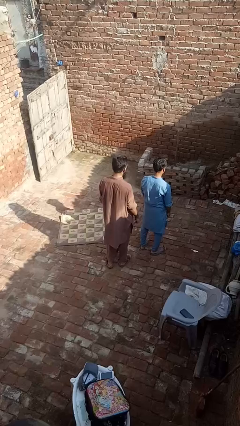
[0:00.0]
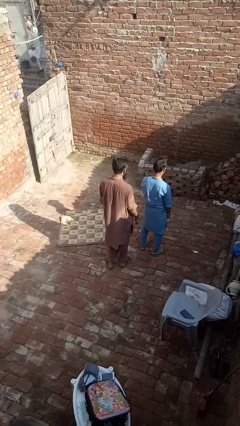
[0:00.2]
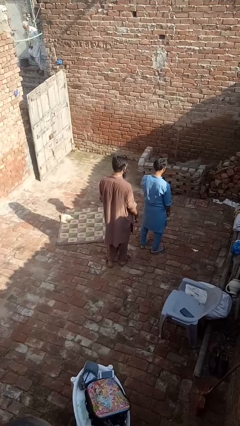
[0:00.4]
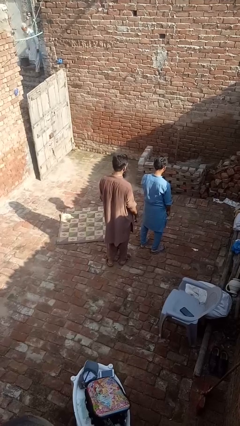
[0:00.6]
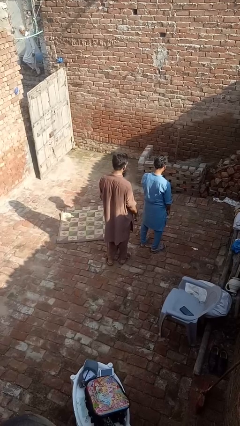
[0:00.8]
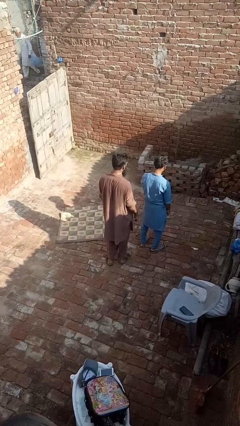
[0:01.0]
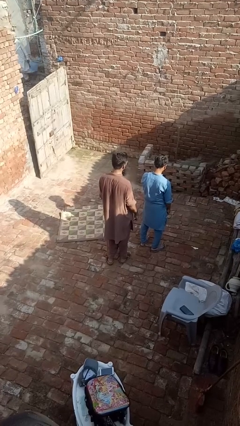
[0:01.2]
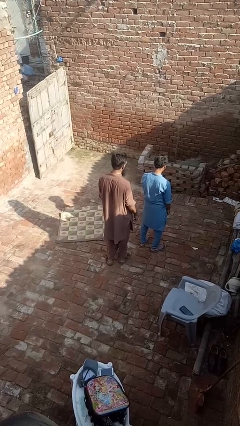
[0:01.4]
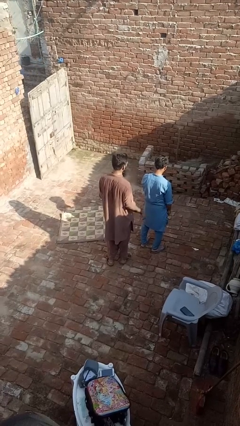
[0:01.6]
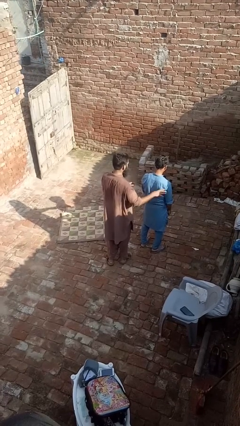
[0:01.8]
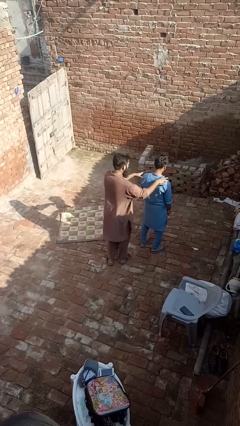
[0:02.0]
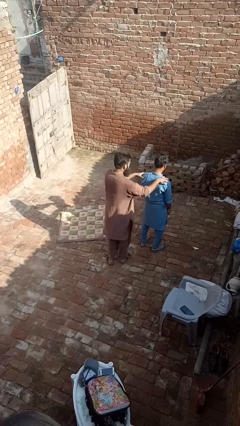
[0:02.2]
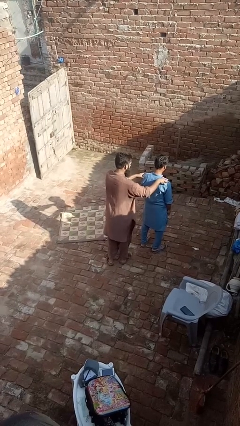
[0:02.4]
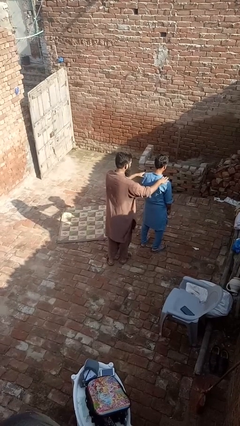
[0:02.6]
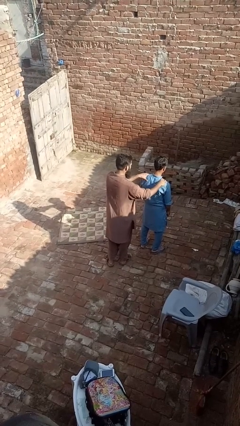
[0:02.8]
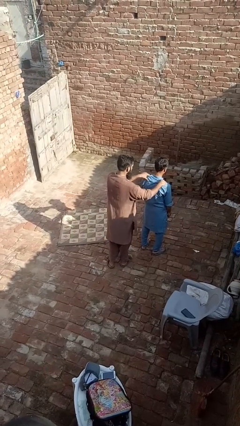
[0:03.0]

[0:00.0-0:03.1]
person grabs person by shoulder

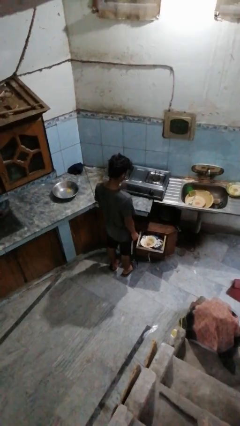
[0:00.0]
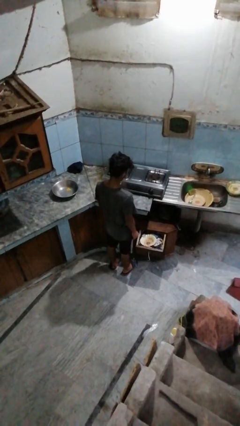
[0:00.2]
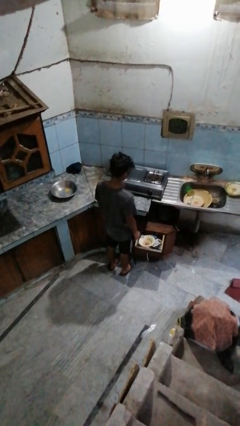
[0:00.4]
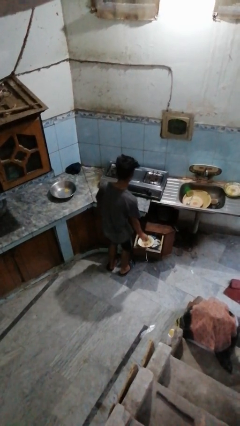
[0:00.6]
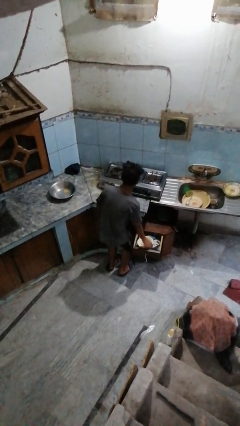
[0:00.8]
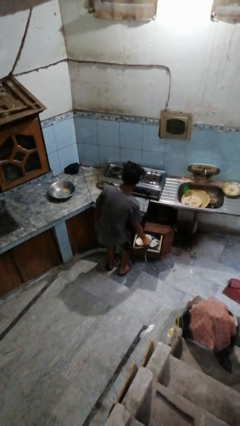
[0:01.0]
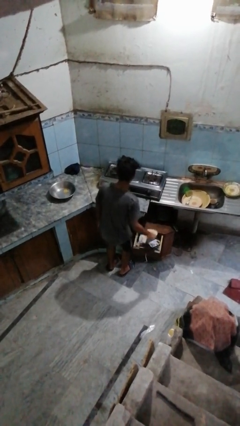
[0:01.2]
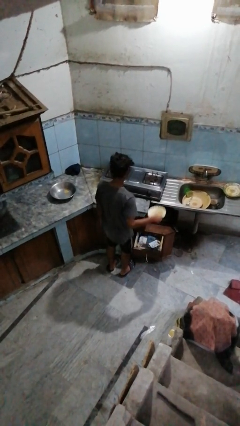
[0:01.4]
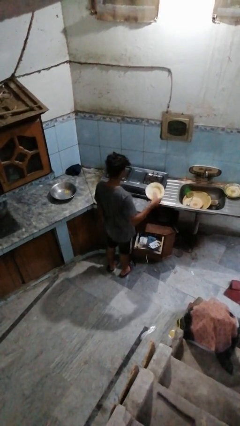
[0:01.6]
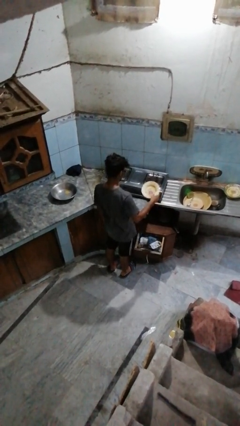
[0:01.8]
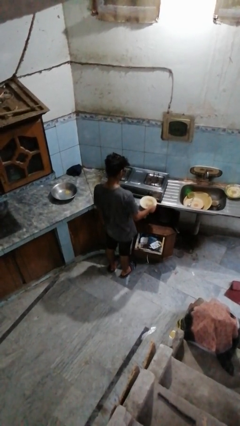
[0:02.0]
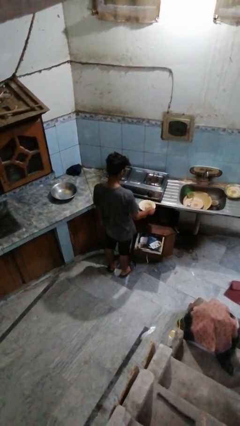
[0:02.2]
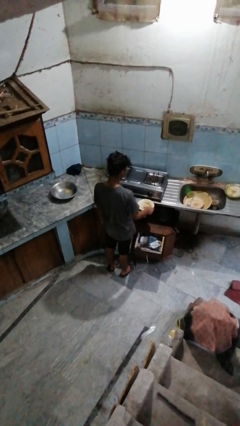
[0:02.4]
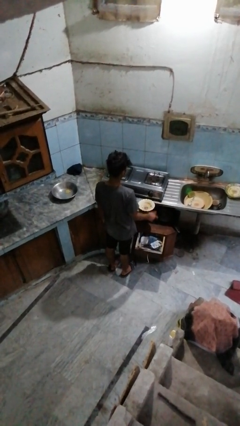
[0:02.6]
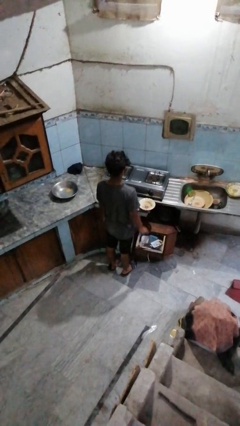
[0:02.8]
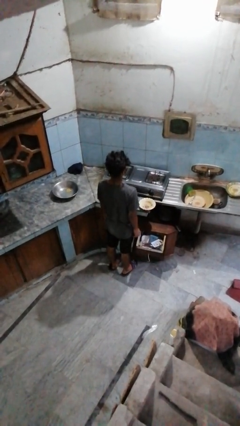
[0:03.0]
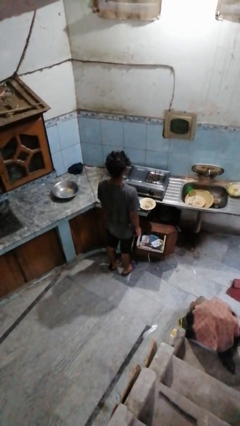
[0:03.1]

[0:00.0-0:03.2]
person takes object from kitchen drawer

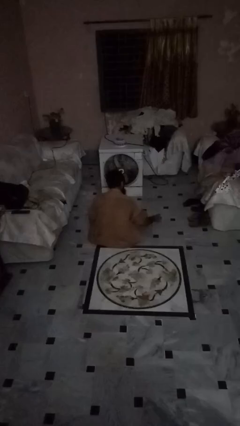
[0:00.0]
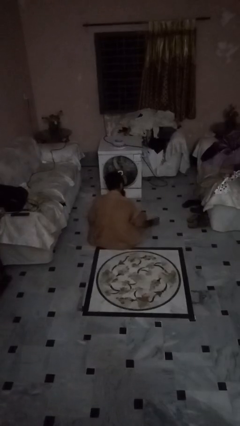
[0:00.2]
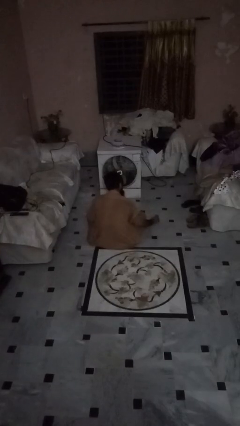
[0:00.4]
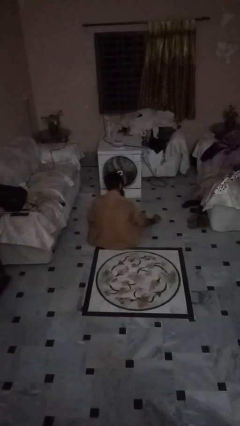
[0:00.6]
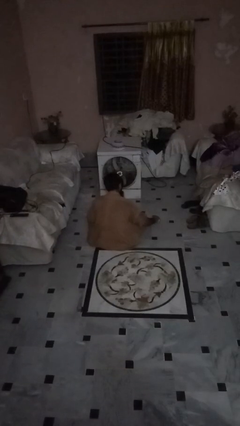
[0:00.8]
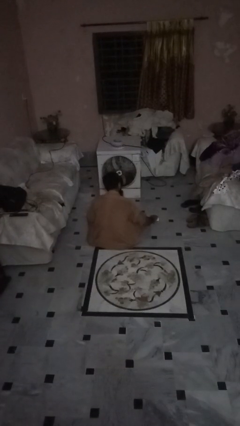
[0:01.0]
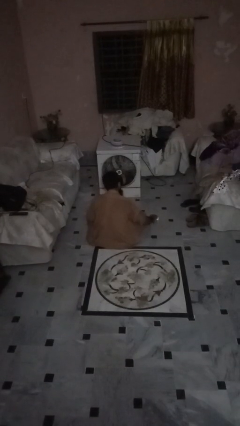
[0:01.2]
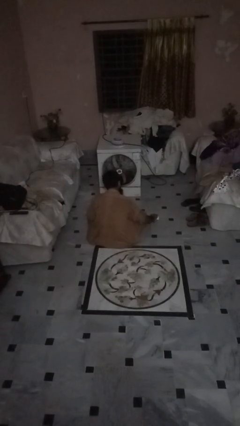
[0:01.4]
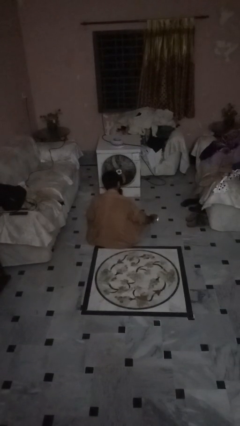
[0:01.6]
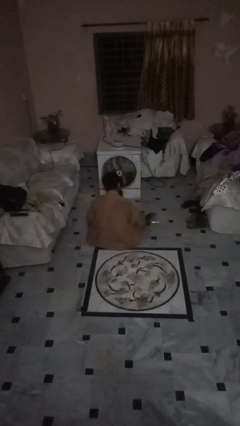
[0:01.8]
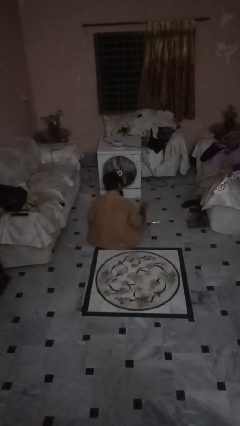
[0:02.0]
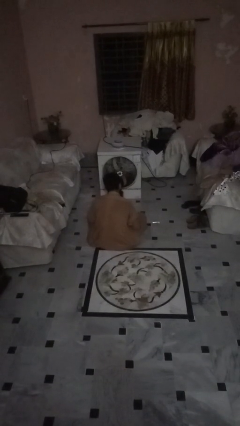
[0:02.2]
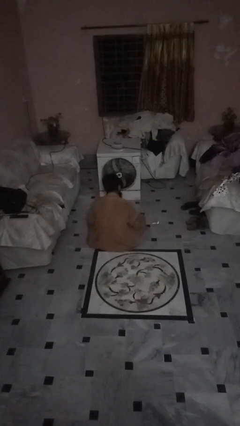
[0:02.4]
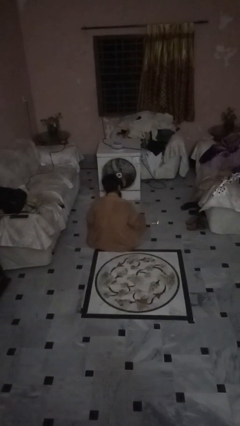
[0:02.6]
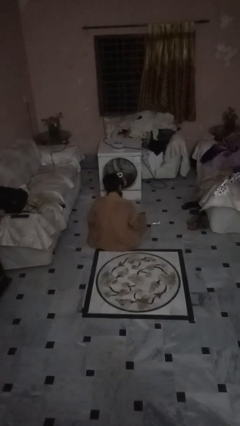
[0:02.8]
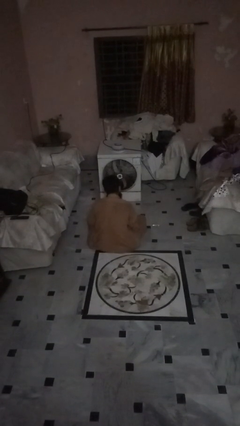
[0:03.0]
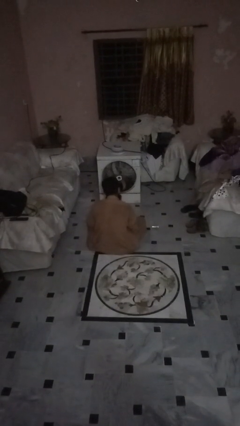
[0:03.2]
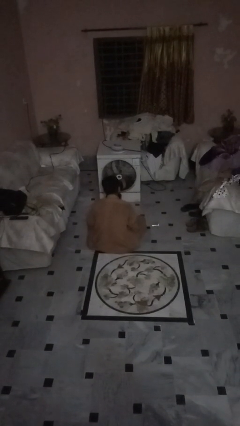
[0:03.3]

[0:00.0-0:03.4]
person spills on floor

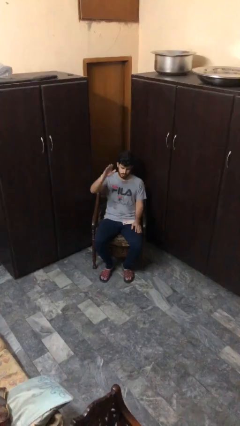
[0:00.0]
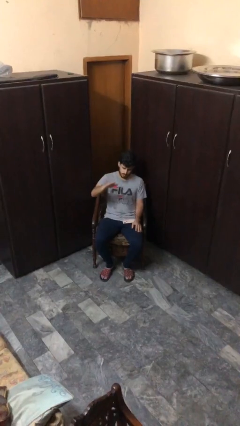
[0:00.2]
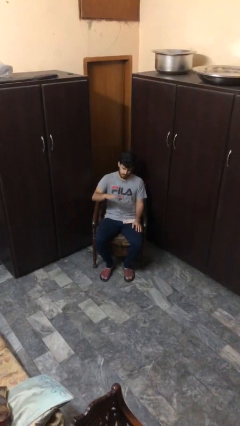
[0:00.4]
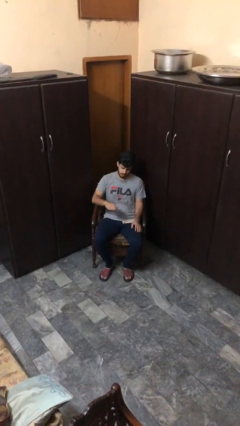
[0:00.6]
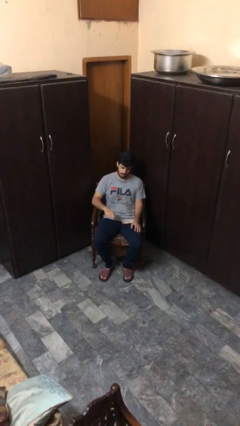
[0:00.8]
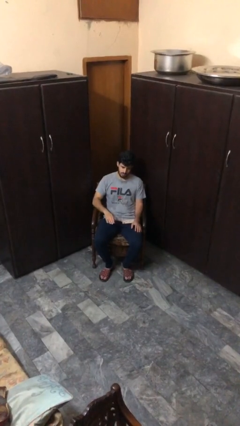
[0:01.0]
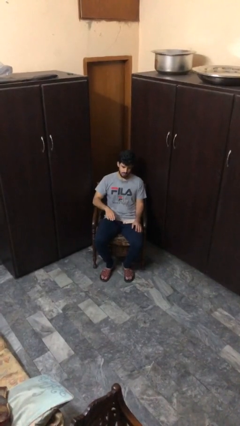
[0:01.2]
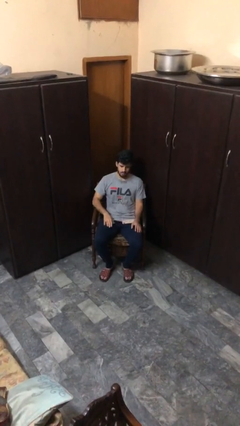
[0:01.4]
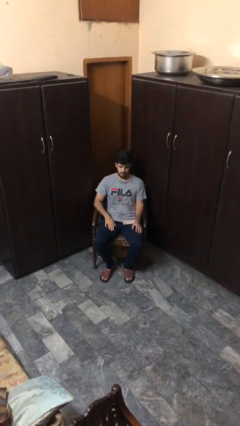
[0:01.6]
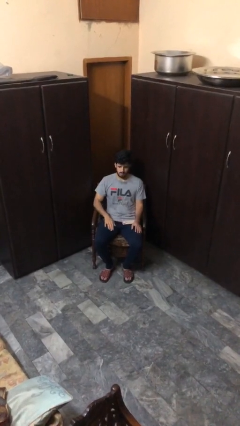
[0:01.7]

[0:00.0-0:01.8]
person gestures swipe down

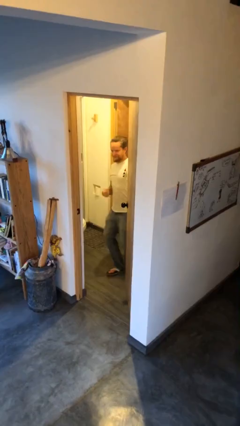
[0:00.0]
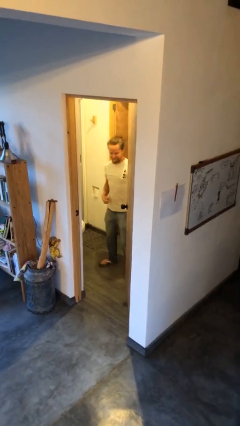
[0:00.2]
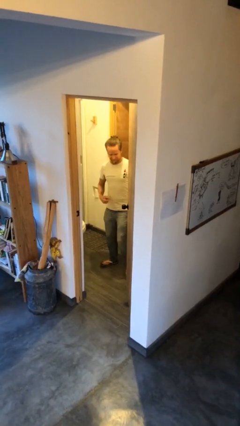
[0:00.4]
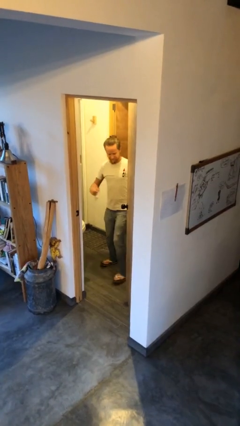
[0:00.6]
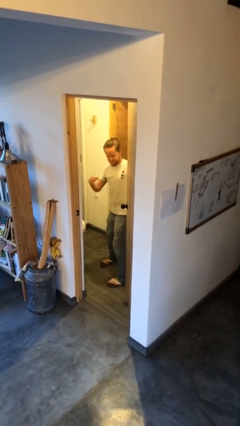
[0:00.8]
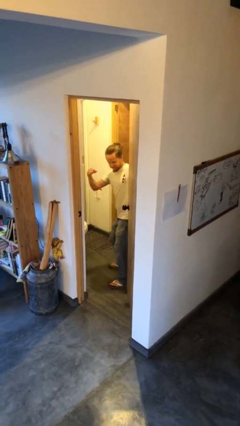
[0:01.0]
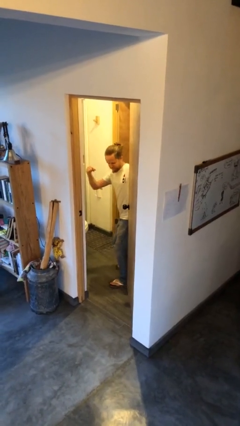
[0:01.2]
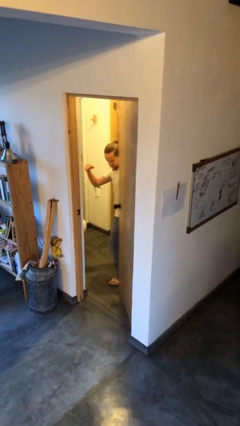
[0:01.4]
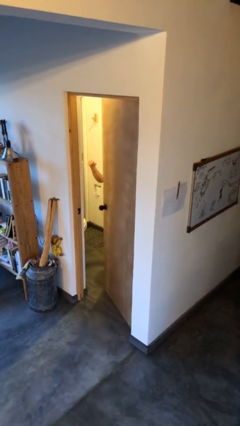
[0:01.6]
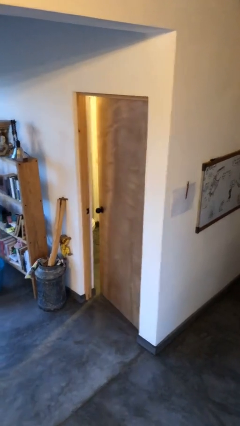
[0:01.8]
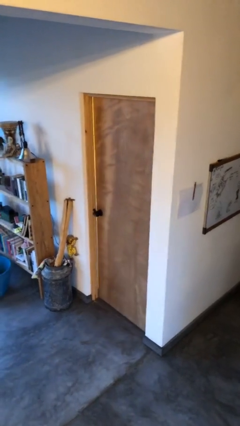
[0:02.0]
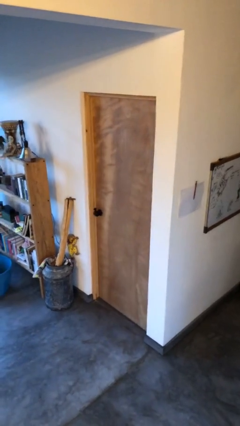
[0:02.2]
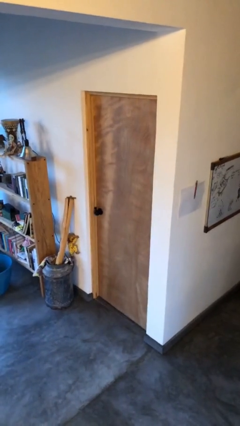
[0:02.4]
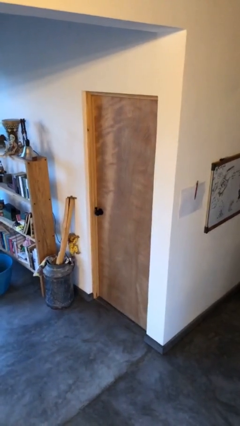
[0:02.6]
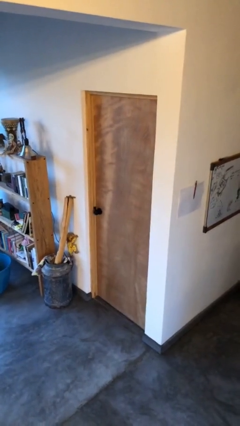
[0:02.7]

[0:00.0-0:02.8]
person closes door with hip

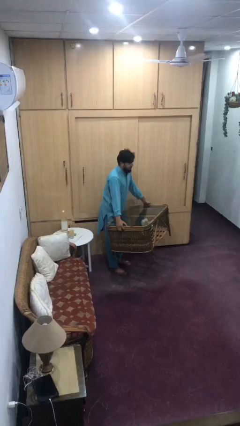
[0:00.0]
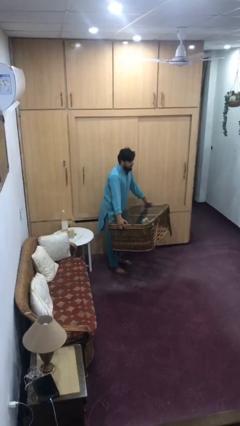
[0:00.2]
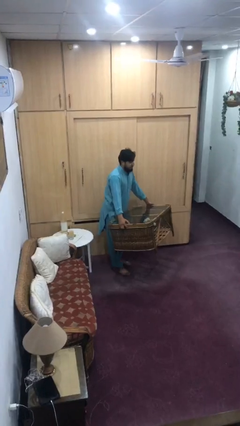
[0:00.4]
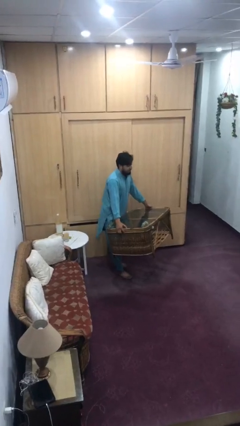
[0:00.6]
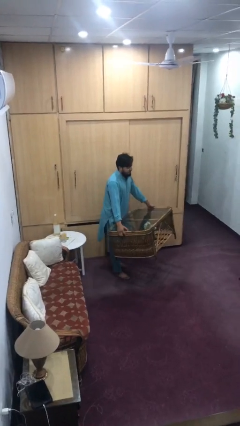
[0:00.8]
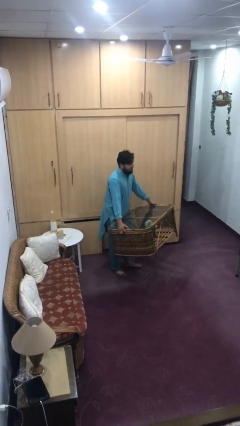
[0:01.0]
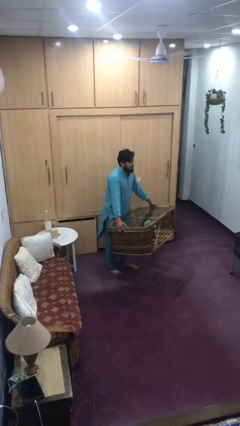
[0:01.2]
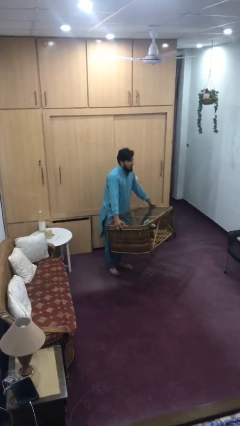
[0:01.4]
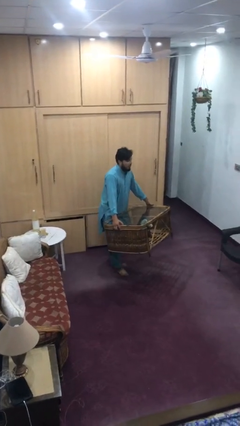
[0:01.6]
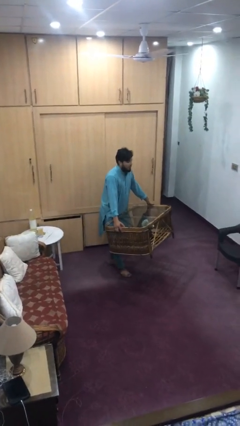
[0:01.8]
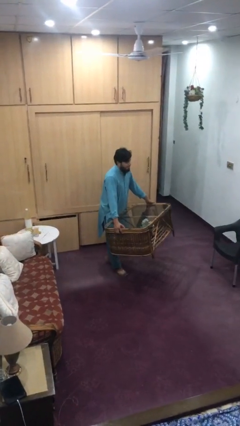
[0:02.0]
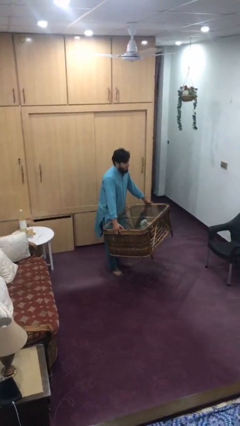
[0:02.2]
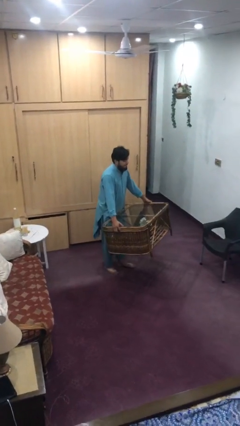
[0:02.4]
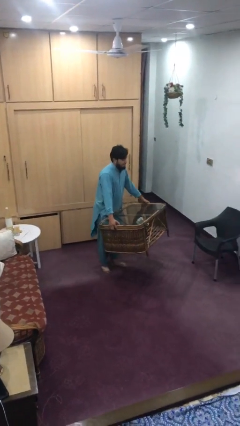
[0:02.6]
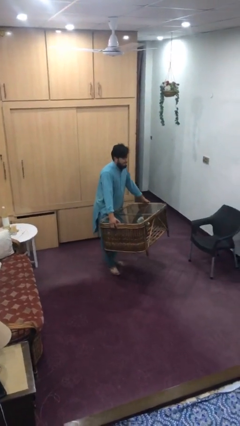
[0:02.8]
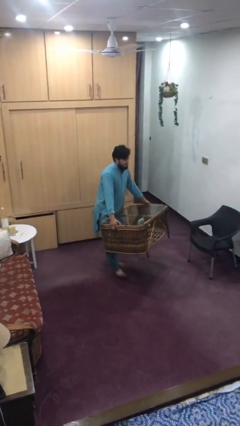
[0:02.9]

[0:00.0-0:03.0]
person carries heavy object

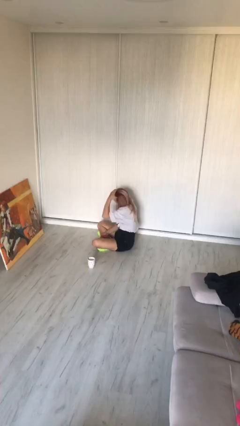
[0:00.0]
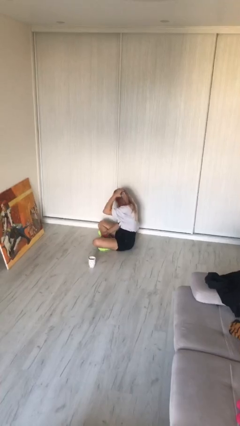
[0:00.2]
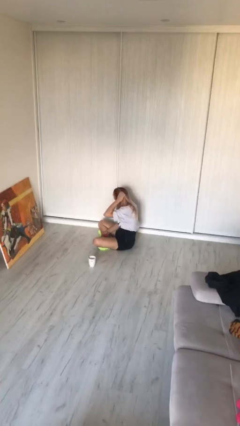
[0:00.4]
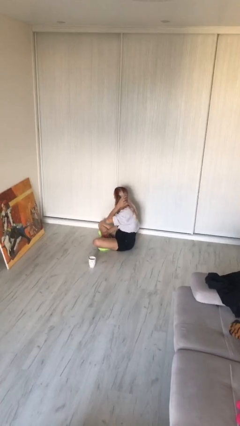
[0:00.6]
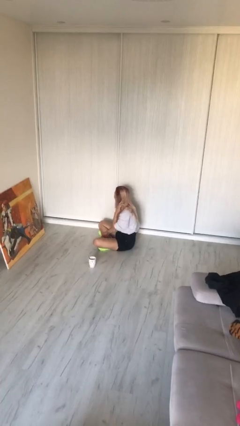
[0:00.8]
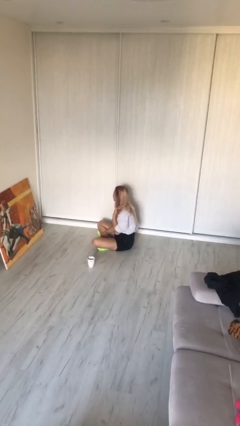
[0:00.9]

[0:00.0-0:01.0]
person strokes hair
